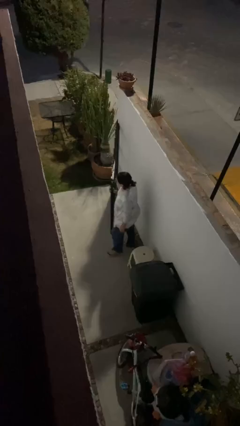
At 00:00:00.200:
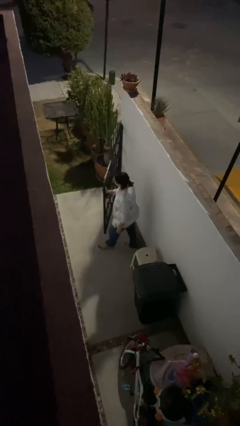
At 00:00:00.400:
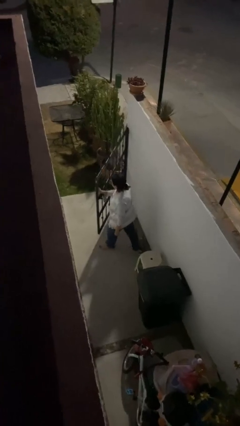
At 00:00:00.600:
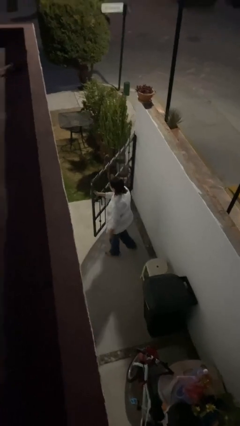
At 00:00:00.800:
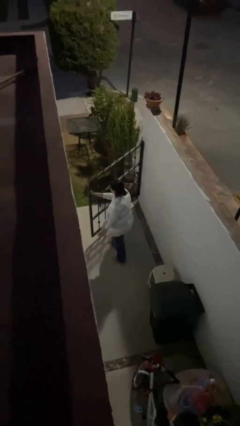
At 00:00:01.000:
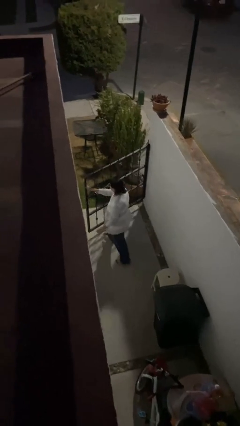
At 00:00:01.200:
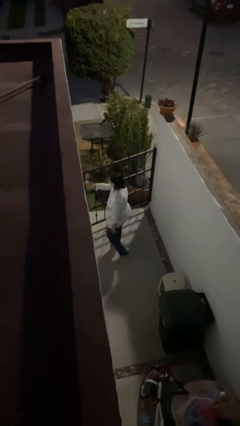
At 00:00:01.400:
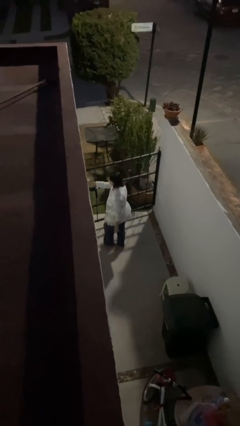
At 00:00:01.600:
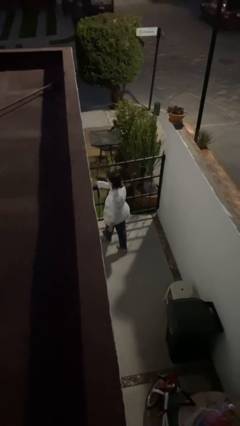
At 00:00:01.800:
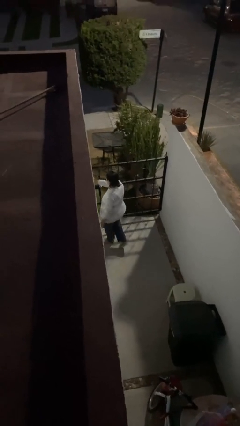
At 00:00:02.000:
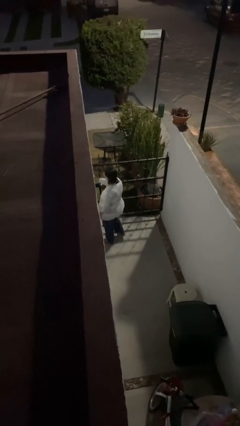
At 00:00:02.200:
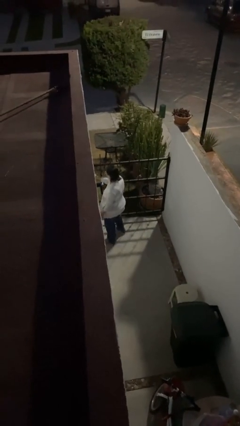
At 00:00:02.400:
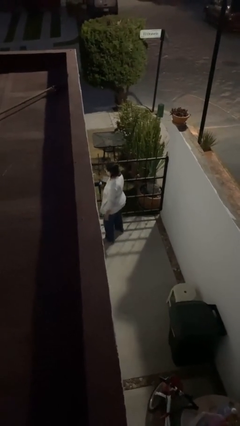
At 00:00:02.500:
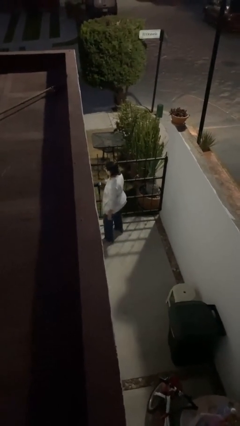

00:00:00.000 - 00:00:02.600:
person closes facility door

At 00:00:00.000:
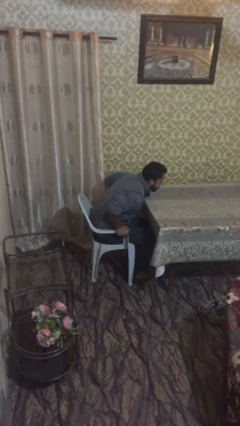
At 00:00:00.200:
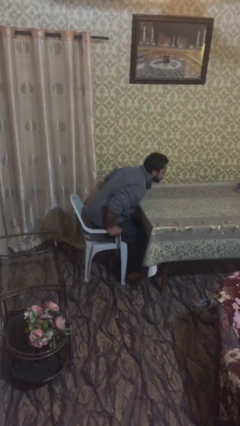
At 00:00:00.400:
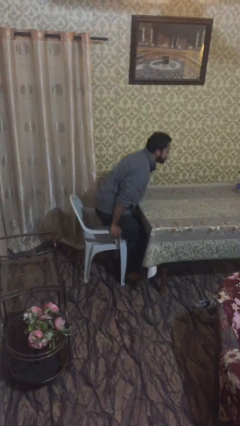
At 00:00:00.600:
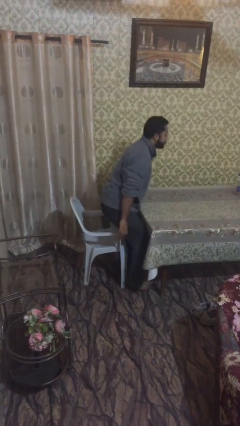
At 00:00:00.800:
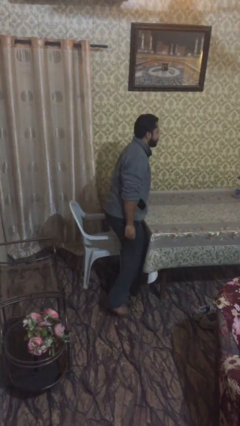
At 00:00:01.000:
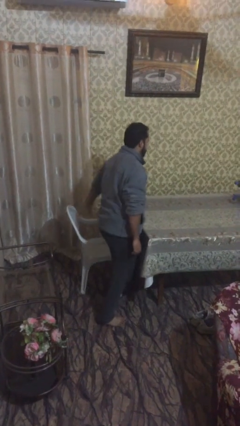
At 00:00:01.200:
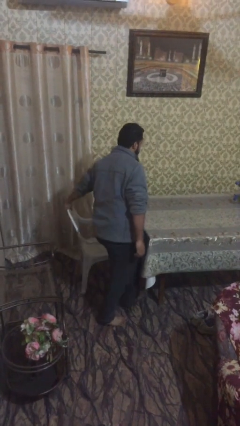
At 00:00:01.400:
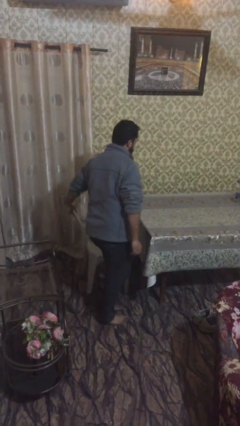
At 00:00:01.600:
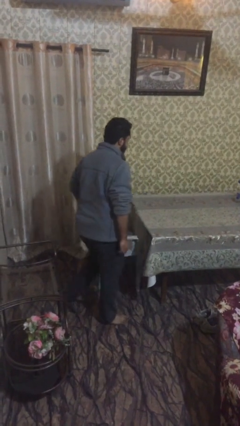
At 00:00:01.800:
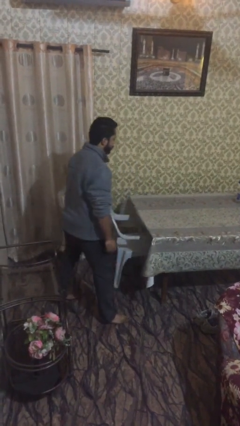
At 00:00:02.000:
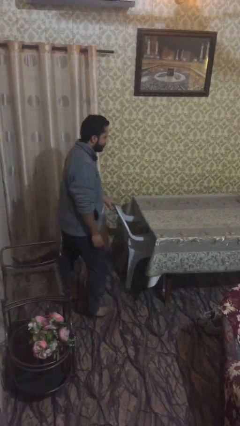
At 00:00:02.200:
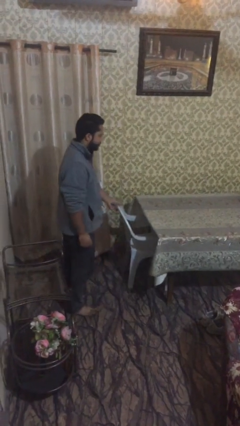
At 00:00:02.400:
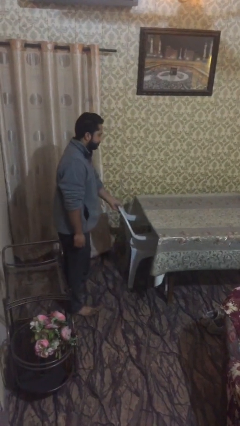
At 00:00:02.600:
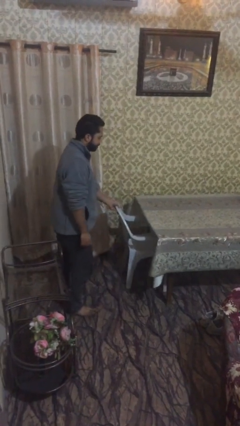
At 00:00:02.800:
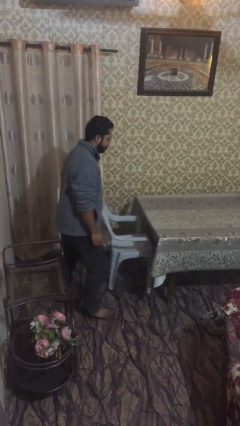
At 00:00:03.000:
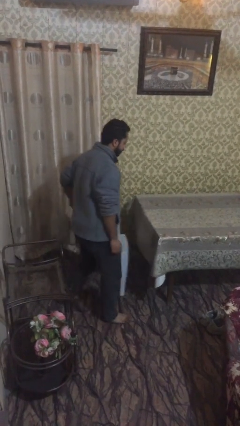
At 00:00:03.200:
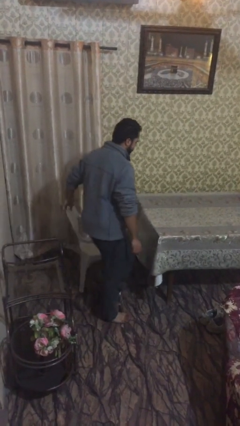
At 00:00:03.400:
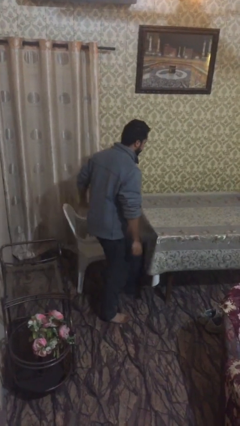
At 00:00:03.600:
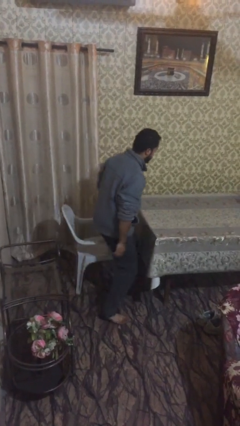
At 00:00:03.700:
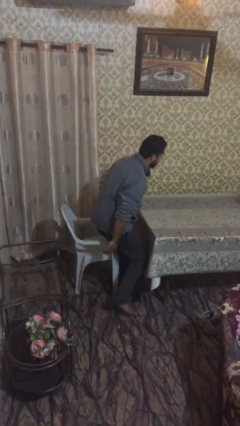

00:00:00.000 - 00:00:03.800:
person stands up

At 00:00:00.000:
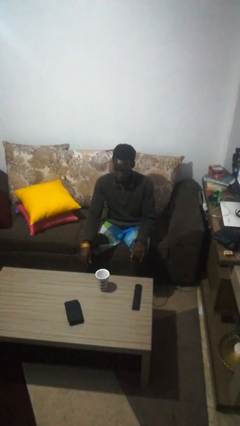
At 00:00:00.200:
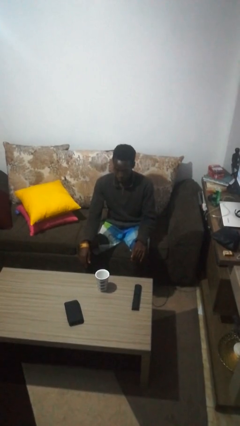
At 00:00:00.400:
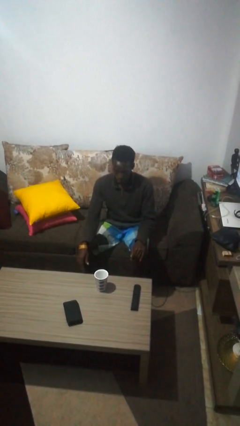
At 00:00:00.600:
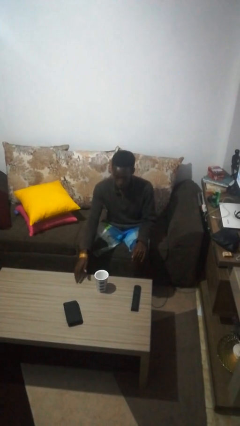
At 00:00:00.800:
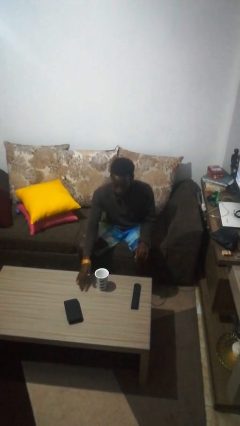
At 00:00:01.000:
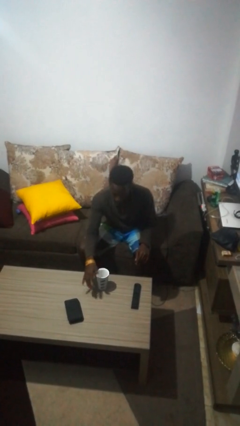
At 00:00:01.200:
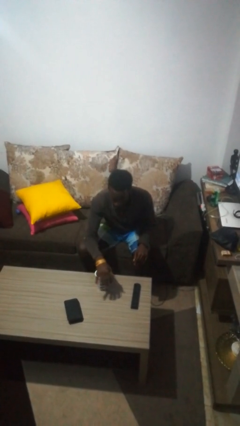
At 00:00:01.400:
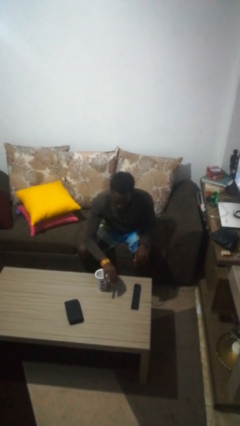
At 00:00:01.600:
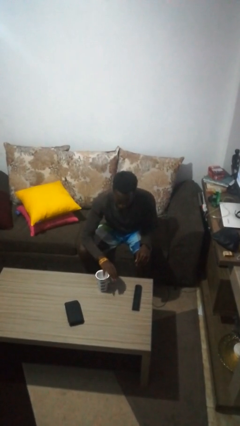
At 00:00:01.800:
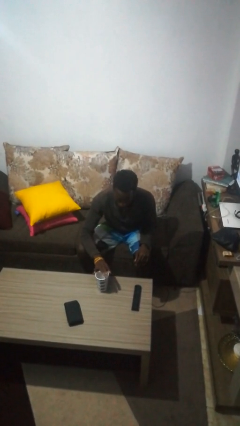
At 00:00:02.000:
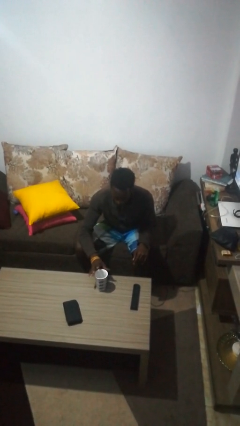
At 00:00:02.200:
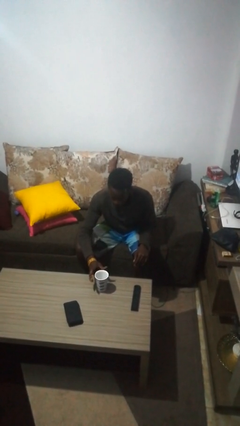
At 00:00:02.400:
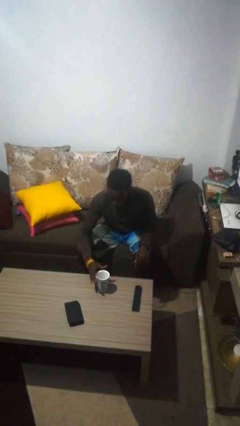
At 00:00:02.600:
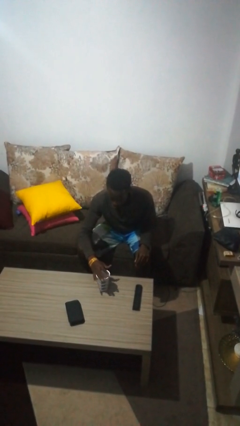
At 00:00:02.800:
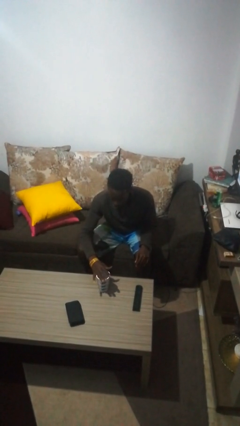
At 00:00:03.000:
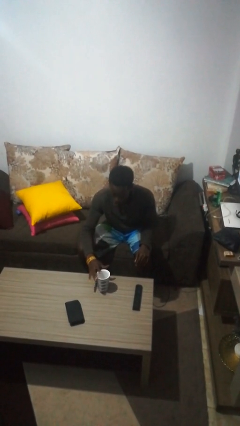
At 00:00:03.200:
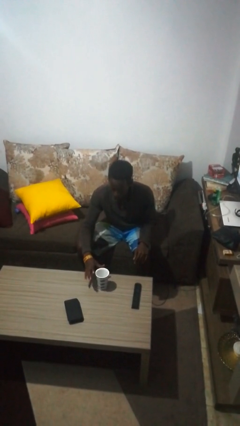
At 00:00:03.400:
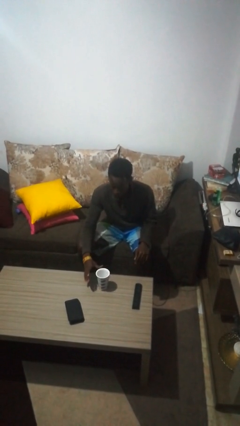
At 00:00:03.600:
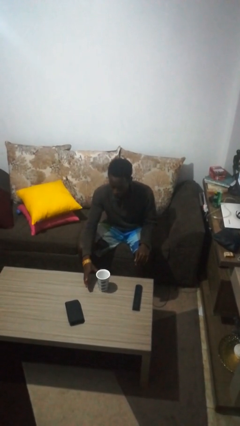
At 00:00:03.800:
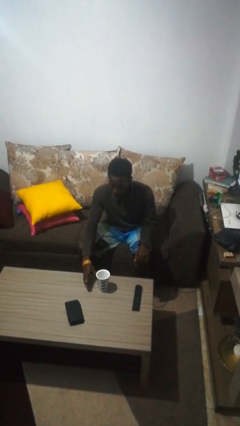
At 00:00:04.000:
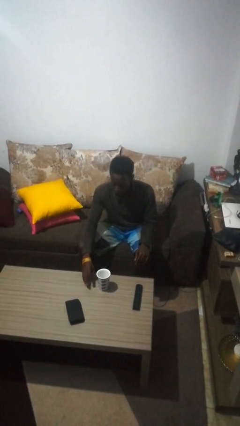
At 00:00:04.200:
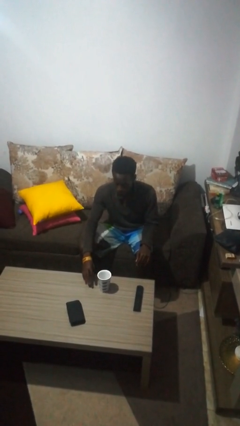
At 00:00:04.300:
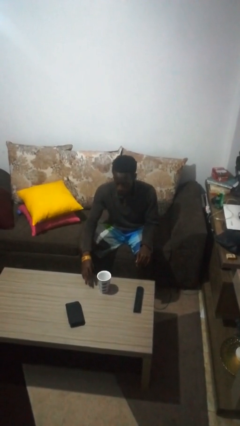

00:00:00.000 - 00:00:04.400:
person waves hand over object

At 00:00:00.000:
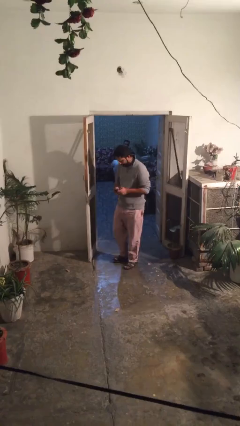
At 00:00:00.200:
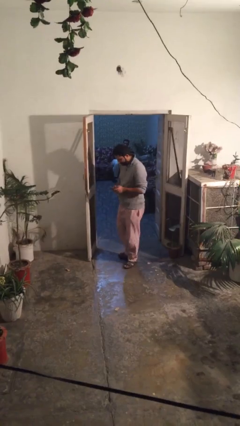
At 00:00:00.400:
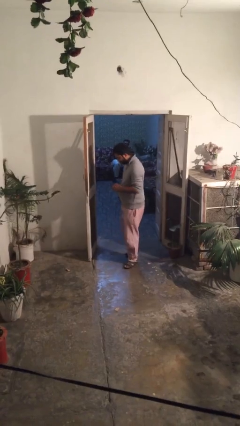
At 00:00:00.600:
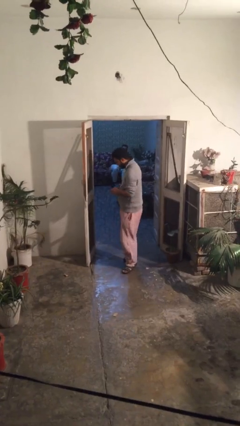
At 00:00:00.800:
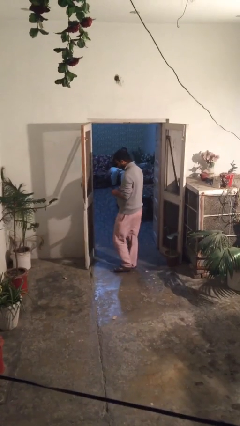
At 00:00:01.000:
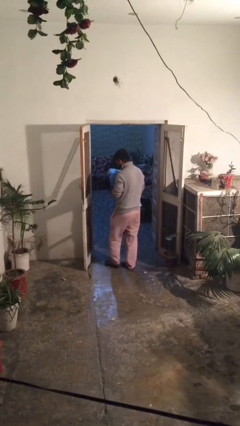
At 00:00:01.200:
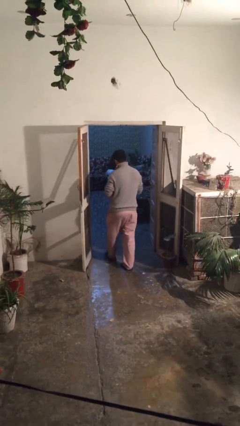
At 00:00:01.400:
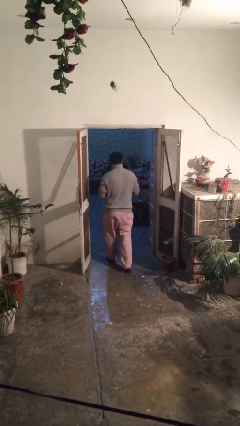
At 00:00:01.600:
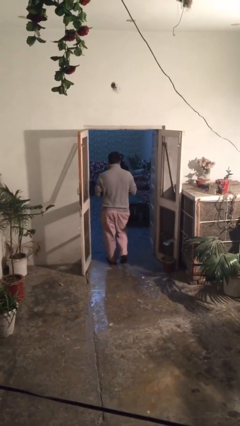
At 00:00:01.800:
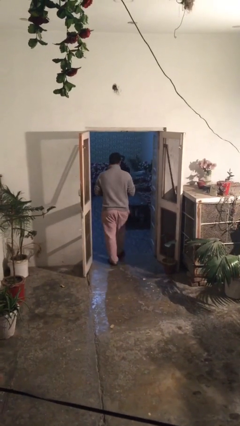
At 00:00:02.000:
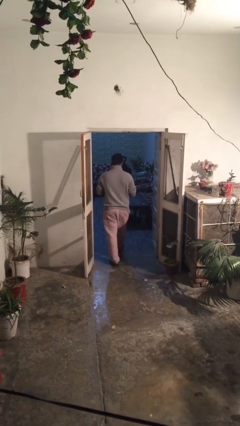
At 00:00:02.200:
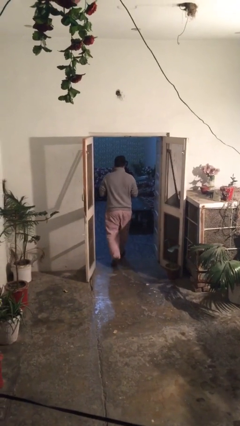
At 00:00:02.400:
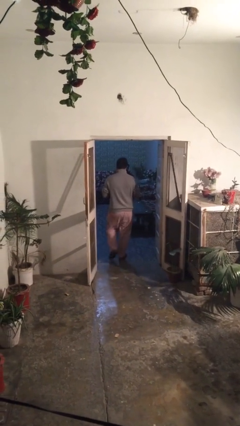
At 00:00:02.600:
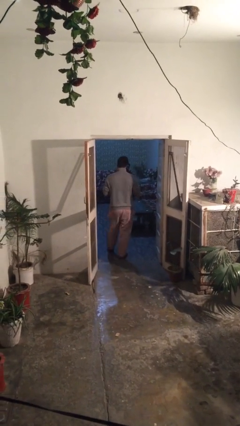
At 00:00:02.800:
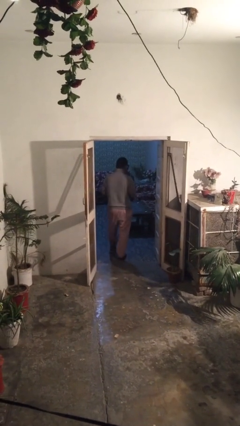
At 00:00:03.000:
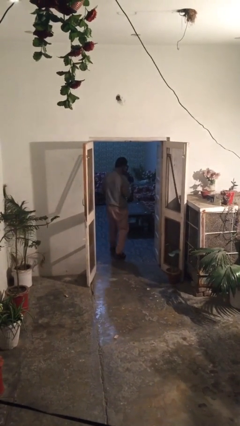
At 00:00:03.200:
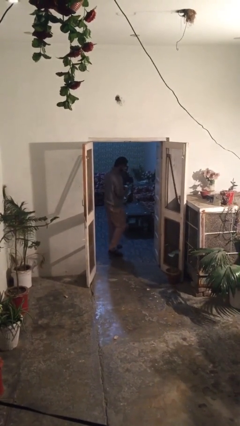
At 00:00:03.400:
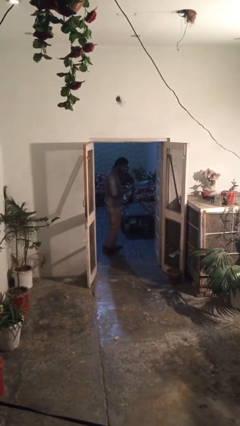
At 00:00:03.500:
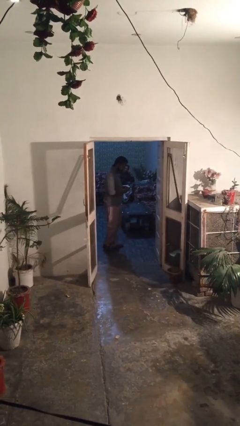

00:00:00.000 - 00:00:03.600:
person exits scene through structure

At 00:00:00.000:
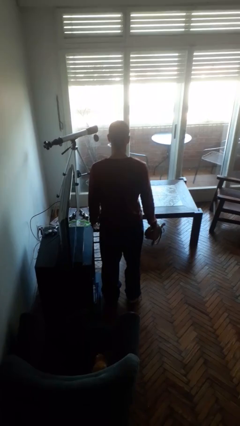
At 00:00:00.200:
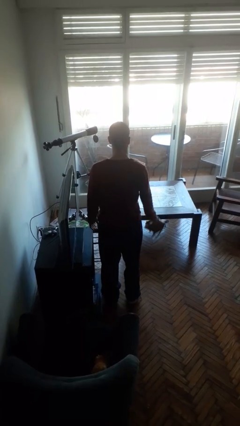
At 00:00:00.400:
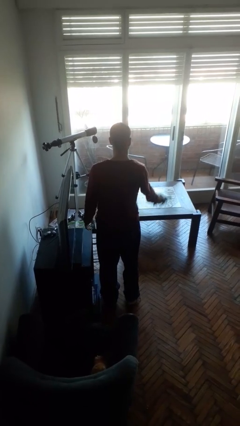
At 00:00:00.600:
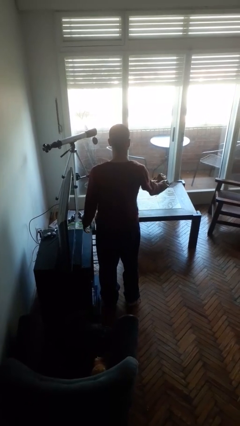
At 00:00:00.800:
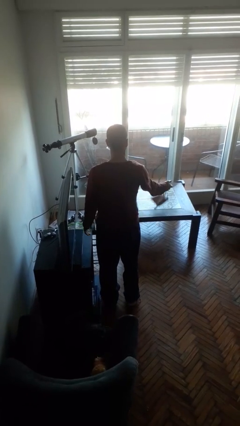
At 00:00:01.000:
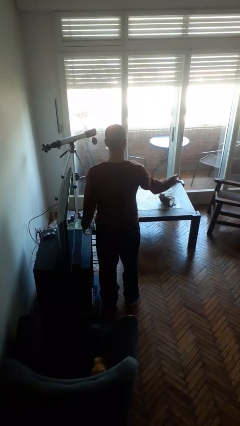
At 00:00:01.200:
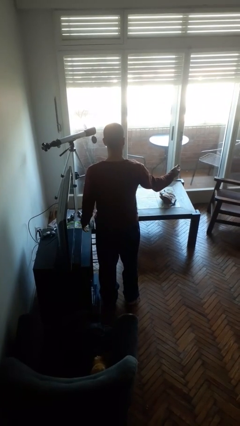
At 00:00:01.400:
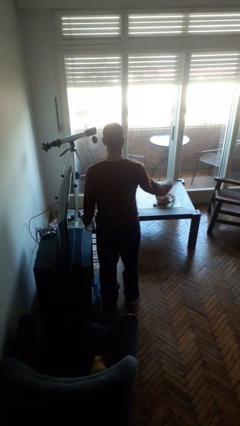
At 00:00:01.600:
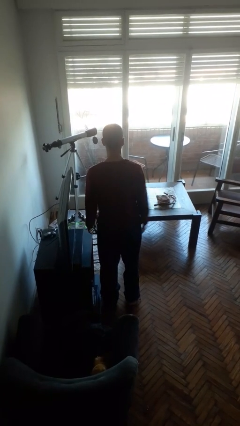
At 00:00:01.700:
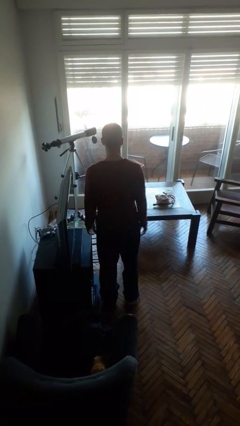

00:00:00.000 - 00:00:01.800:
person throws object on table

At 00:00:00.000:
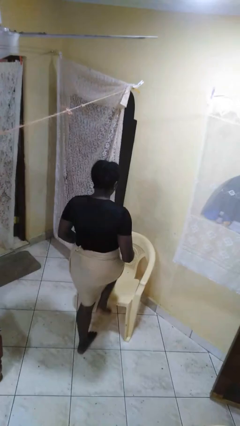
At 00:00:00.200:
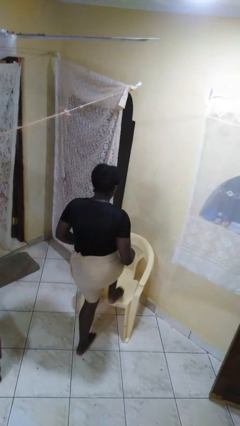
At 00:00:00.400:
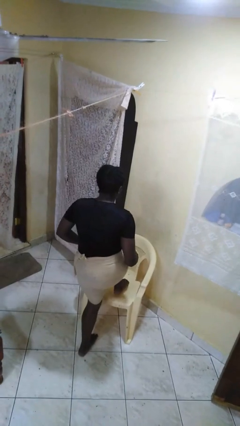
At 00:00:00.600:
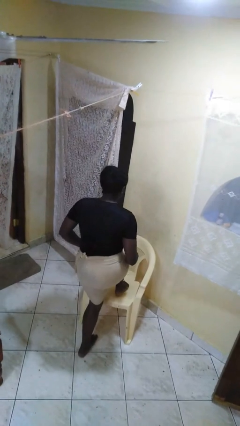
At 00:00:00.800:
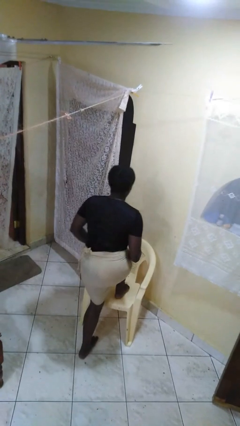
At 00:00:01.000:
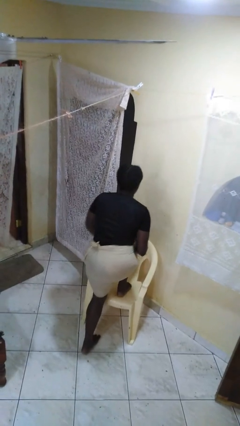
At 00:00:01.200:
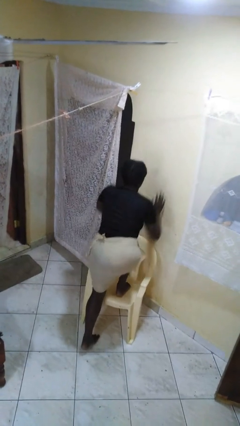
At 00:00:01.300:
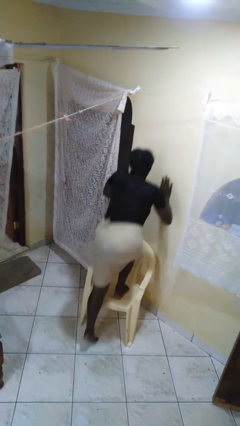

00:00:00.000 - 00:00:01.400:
person climbs on chair
